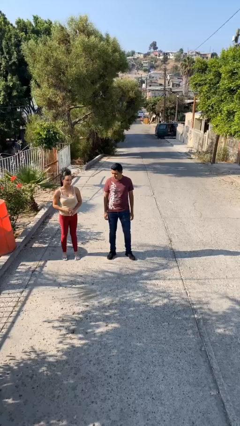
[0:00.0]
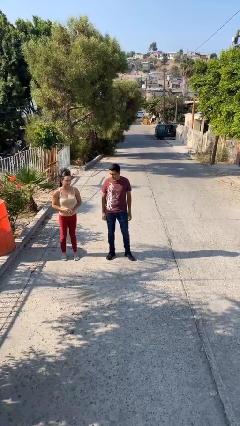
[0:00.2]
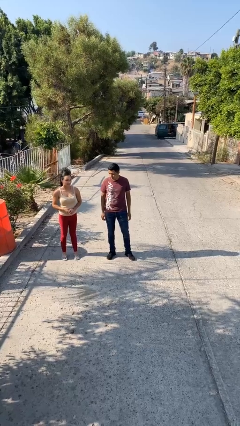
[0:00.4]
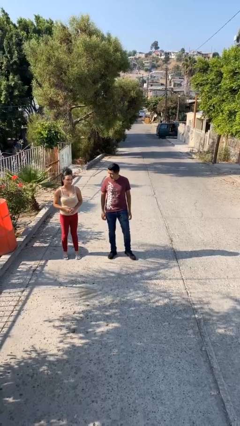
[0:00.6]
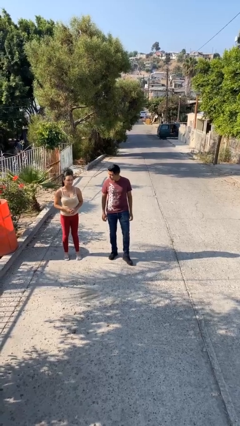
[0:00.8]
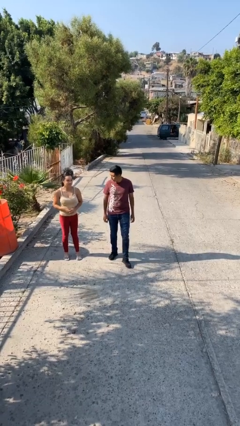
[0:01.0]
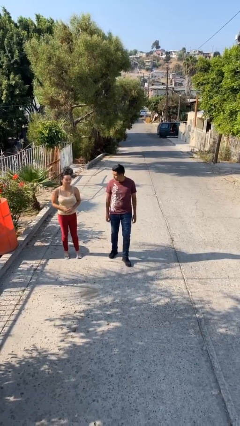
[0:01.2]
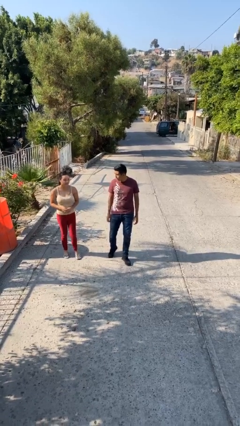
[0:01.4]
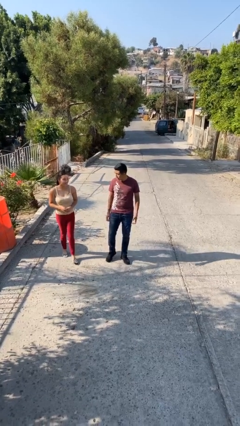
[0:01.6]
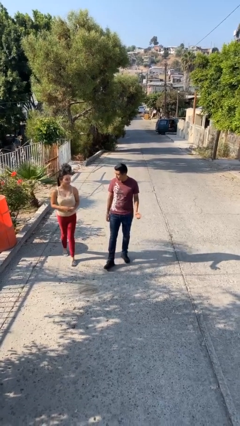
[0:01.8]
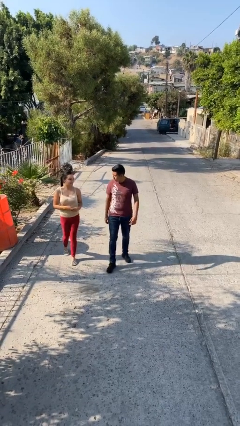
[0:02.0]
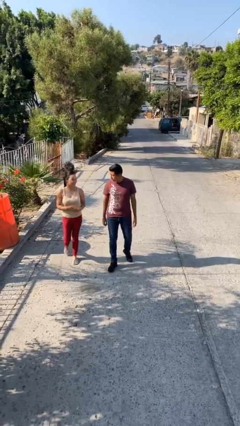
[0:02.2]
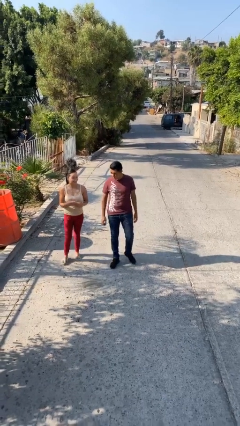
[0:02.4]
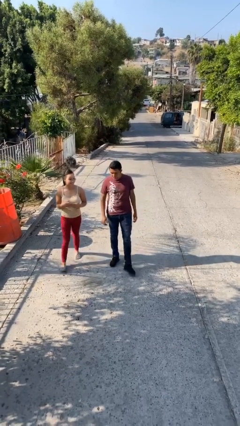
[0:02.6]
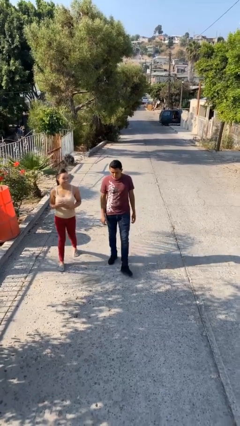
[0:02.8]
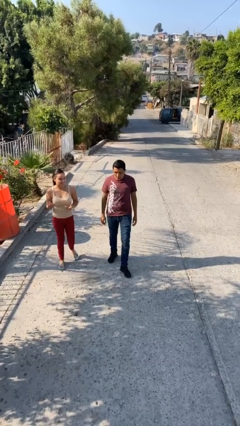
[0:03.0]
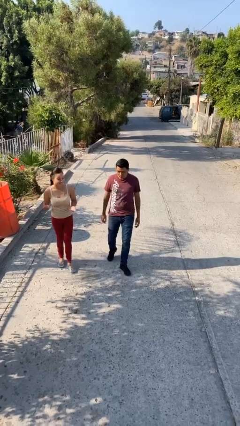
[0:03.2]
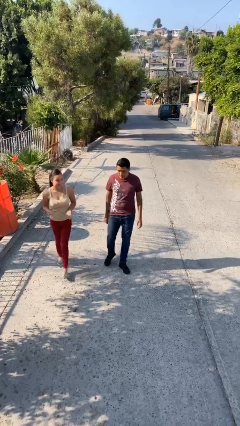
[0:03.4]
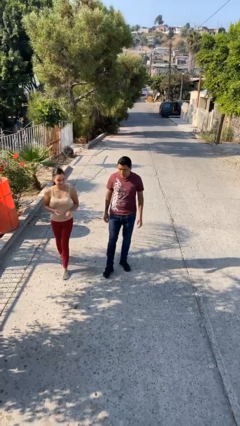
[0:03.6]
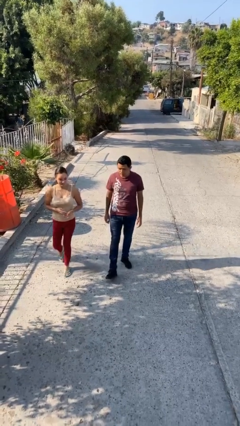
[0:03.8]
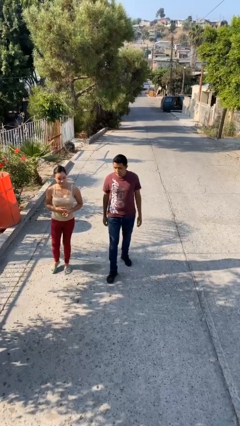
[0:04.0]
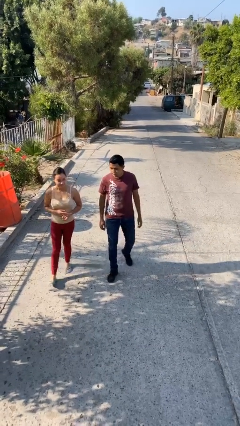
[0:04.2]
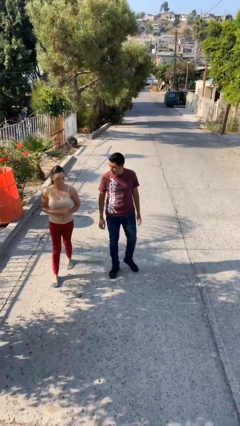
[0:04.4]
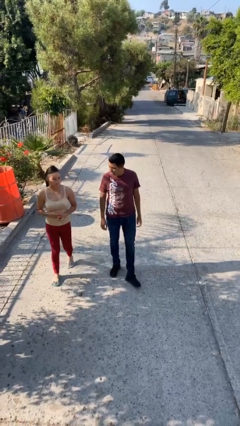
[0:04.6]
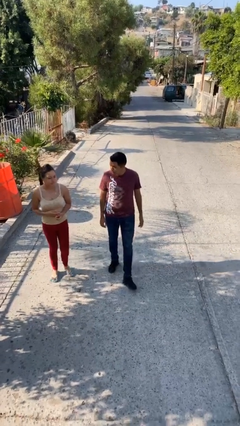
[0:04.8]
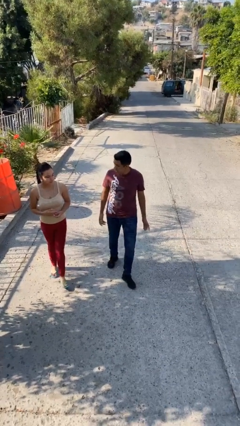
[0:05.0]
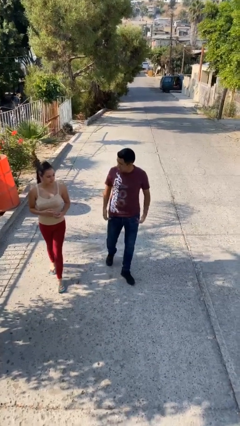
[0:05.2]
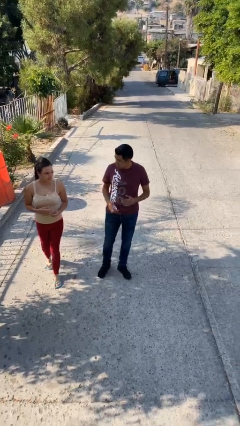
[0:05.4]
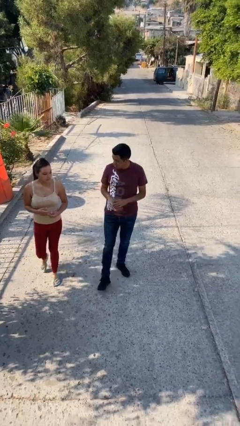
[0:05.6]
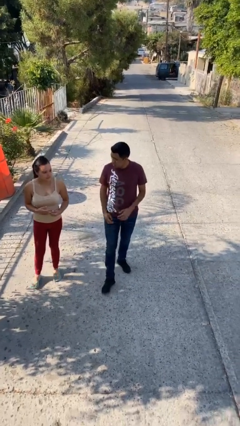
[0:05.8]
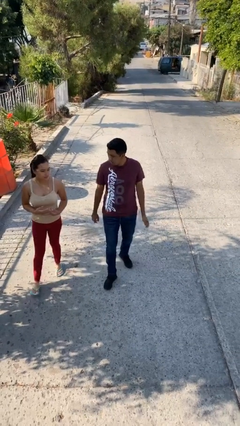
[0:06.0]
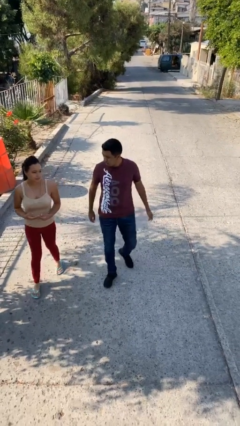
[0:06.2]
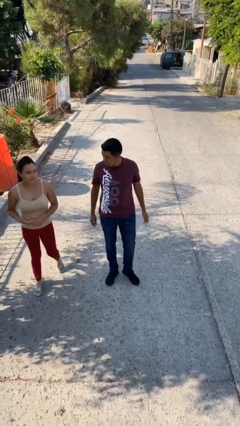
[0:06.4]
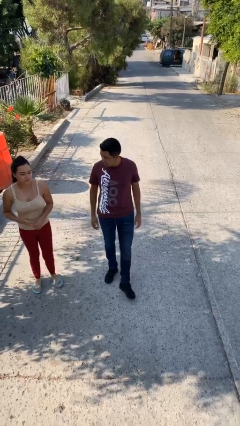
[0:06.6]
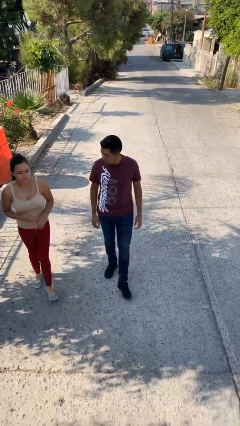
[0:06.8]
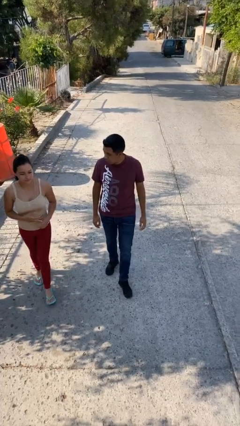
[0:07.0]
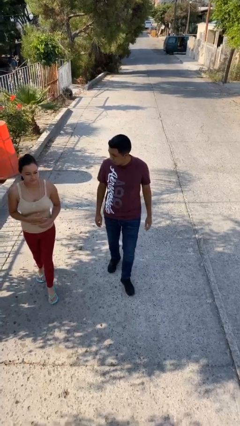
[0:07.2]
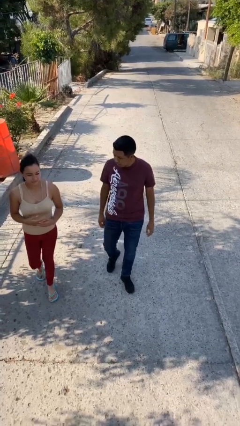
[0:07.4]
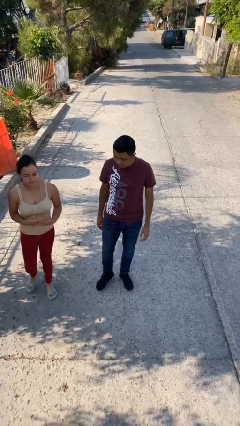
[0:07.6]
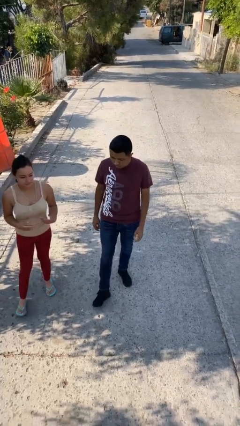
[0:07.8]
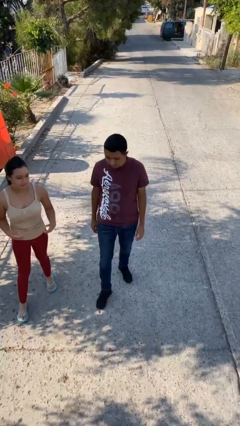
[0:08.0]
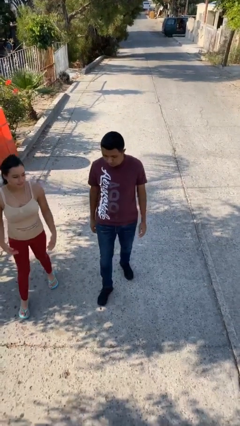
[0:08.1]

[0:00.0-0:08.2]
person talks to person

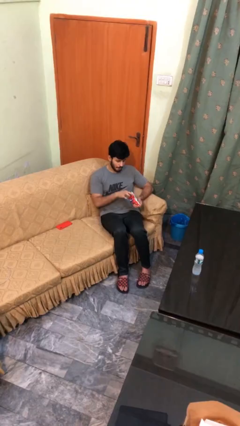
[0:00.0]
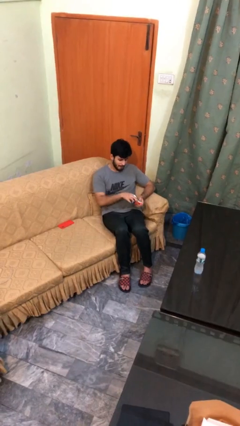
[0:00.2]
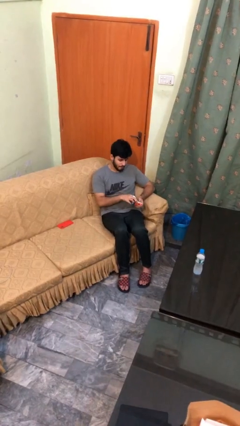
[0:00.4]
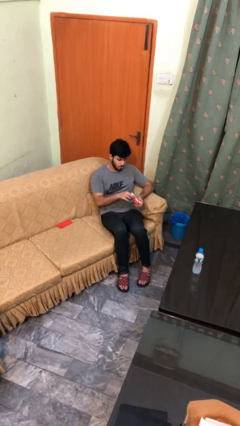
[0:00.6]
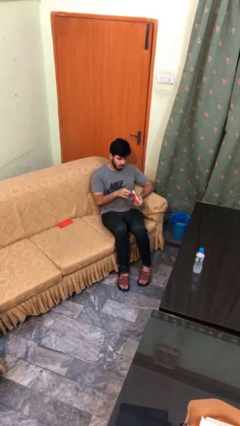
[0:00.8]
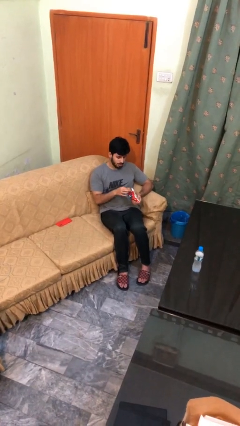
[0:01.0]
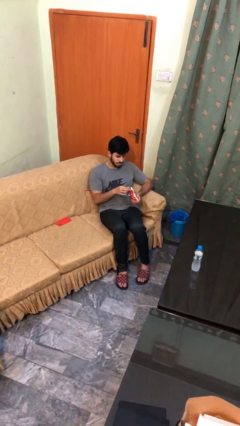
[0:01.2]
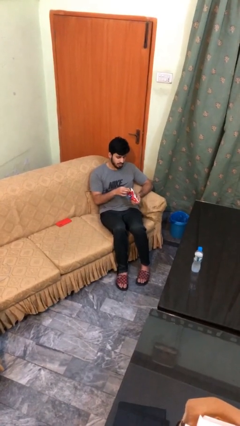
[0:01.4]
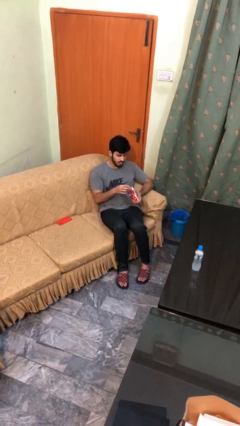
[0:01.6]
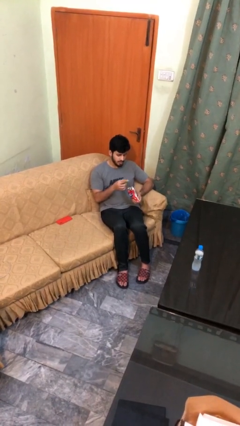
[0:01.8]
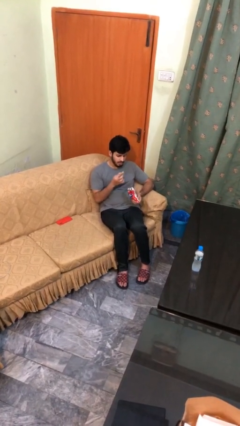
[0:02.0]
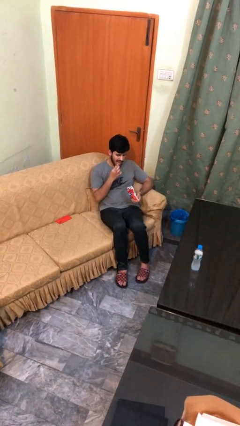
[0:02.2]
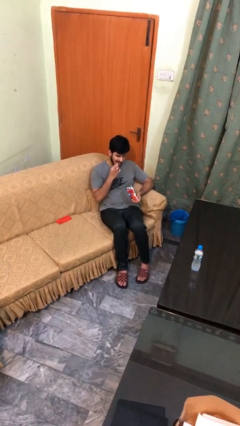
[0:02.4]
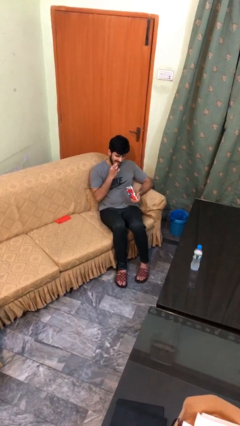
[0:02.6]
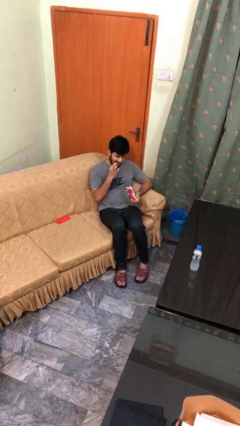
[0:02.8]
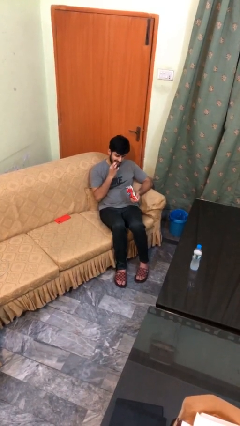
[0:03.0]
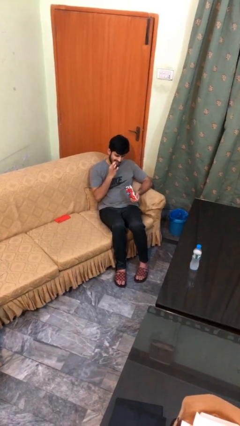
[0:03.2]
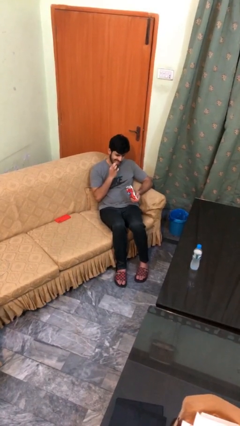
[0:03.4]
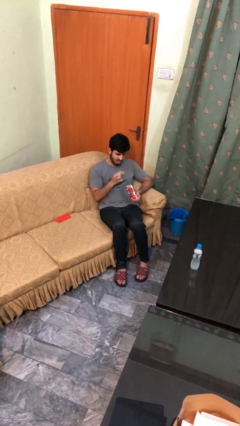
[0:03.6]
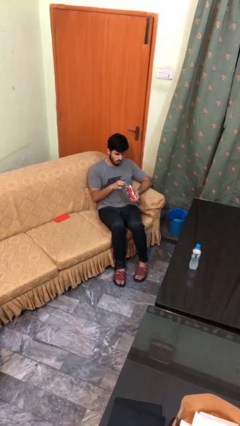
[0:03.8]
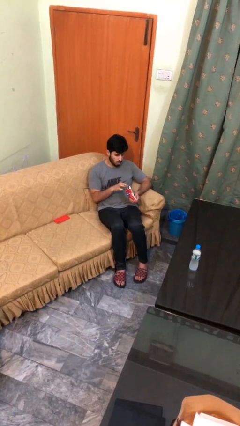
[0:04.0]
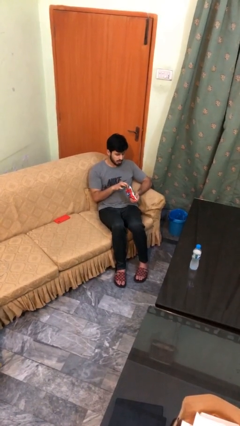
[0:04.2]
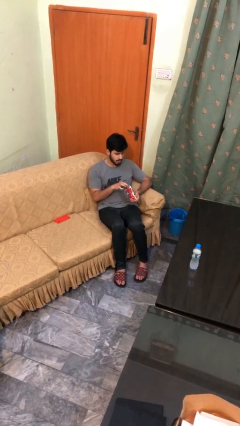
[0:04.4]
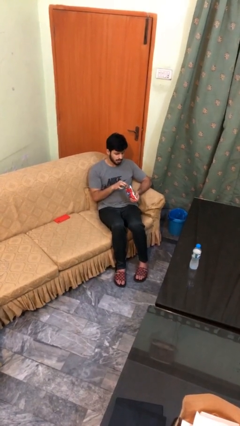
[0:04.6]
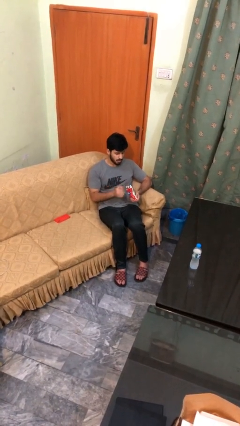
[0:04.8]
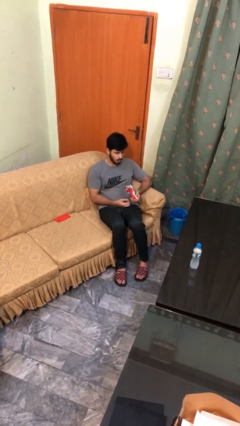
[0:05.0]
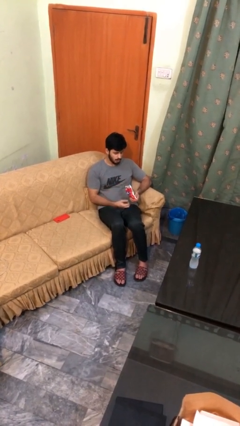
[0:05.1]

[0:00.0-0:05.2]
person eats snack from bag

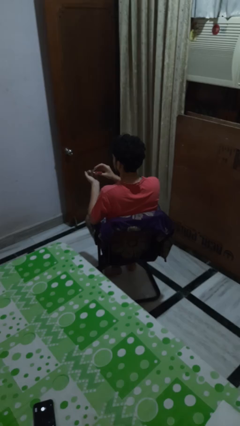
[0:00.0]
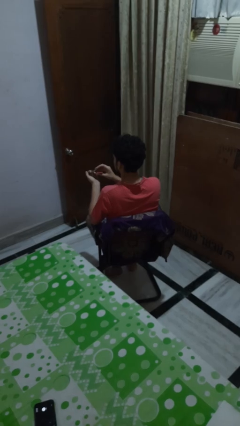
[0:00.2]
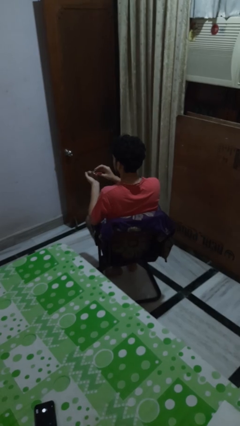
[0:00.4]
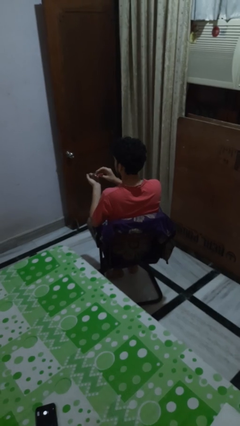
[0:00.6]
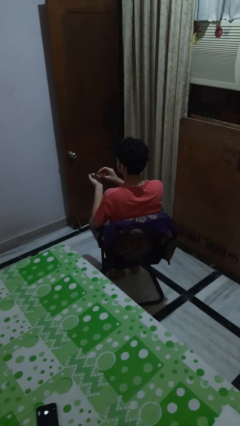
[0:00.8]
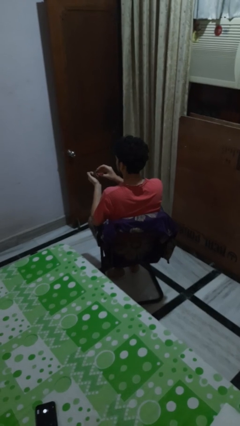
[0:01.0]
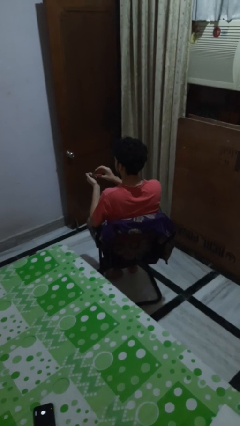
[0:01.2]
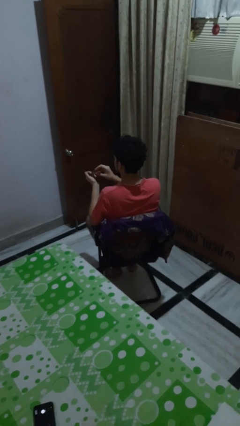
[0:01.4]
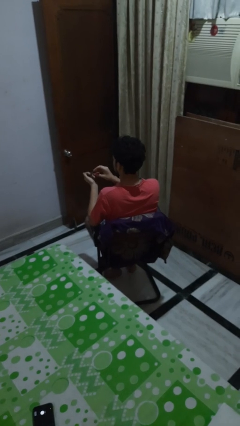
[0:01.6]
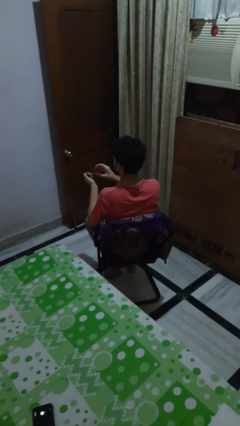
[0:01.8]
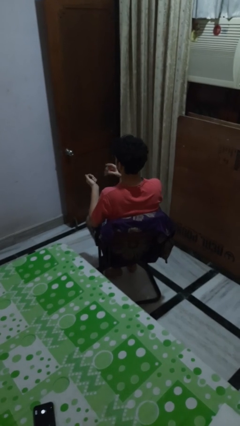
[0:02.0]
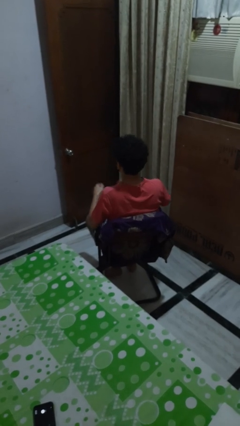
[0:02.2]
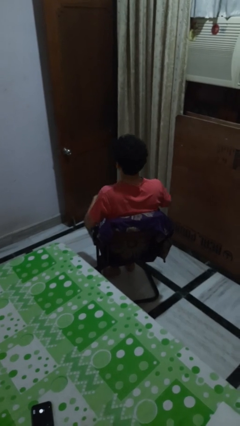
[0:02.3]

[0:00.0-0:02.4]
person clips fingernails

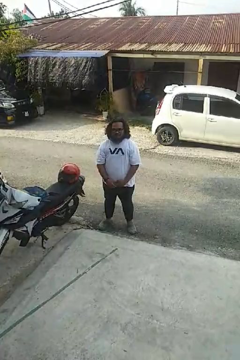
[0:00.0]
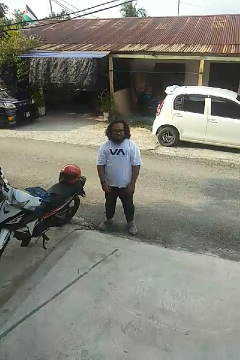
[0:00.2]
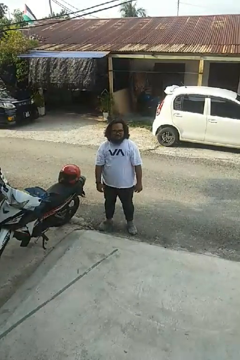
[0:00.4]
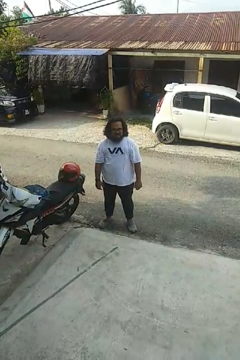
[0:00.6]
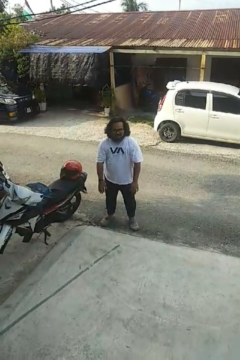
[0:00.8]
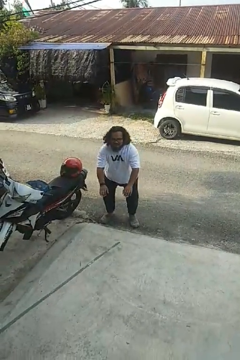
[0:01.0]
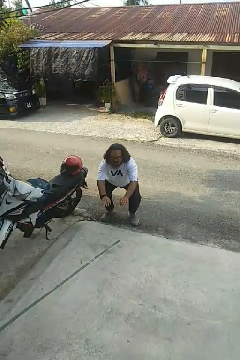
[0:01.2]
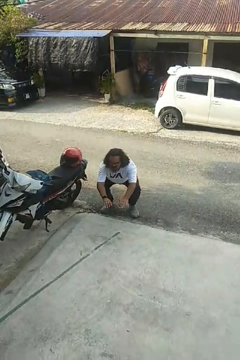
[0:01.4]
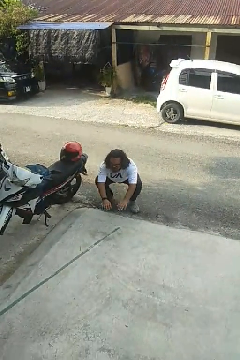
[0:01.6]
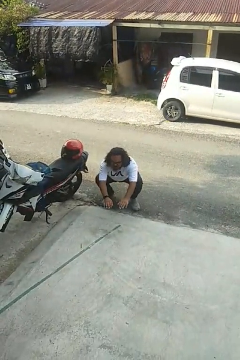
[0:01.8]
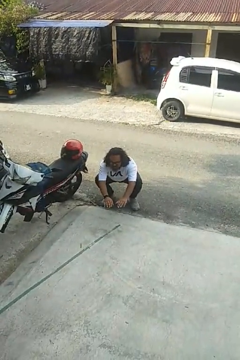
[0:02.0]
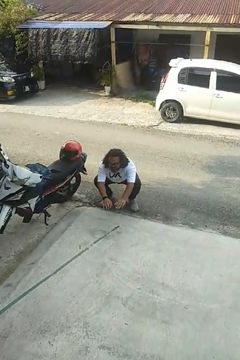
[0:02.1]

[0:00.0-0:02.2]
person squats
